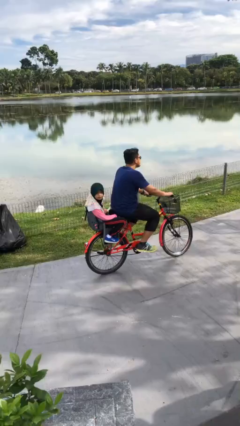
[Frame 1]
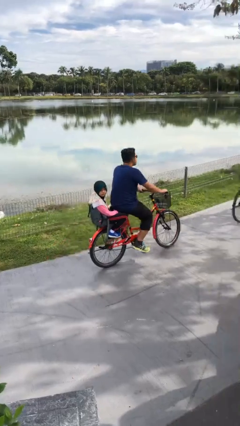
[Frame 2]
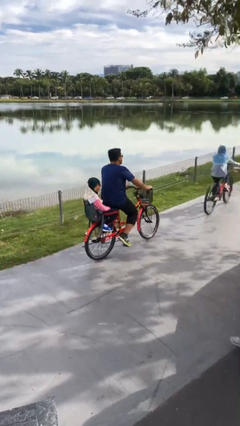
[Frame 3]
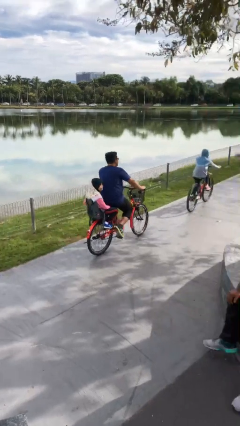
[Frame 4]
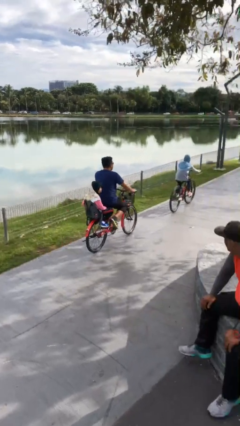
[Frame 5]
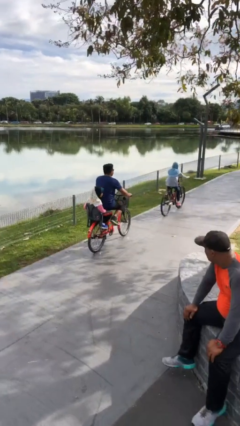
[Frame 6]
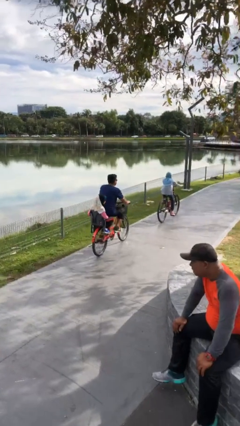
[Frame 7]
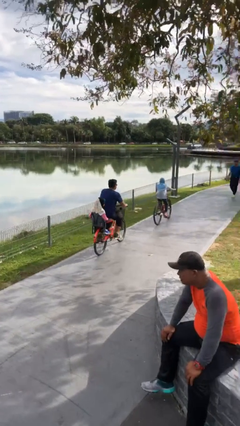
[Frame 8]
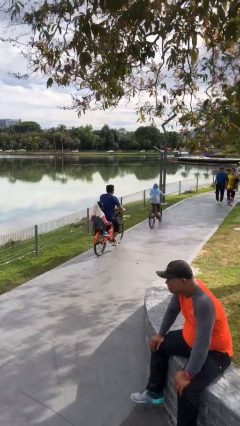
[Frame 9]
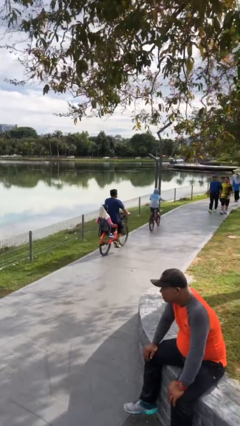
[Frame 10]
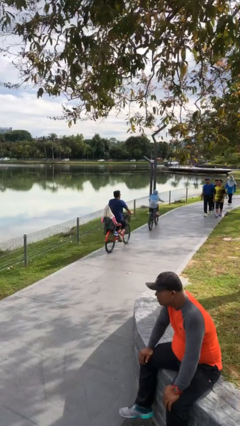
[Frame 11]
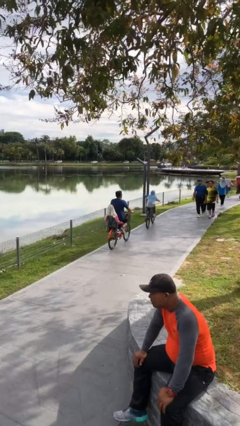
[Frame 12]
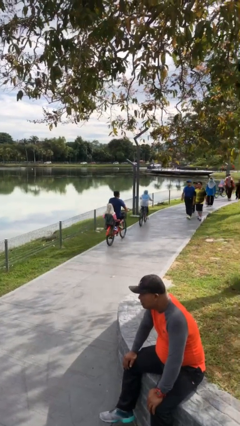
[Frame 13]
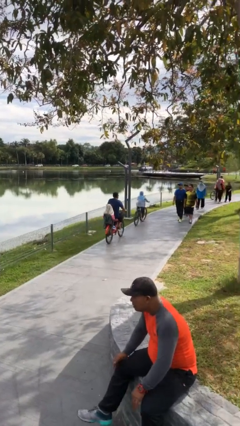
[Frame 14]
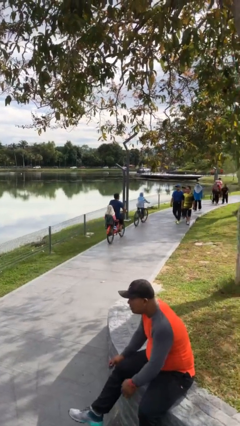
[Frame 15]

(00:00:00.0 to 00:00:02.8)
person rides bicycle

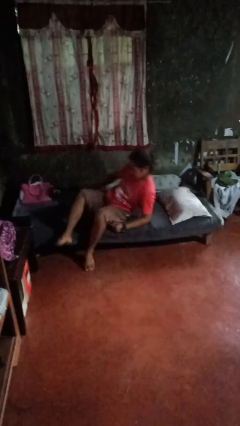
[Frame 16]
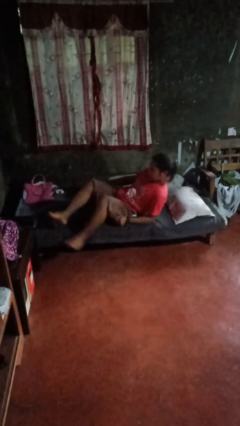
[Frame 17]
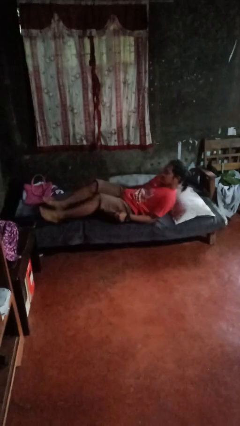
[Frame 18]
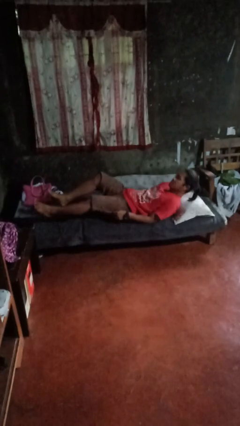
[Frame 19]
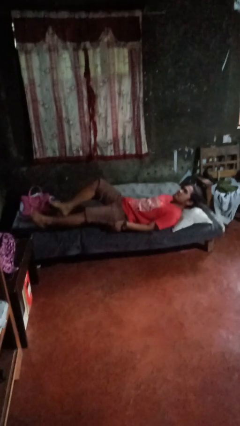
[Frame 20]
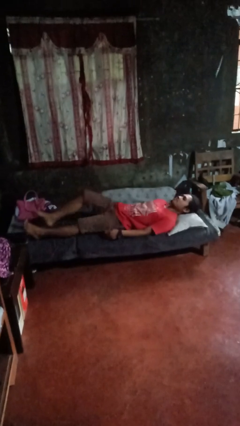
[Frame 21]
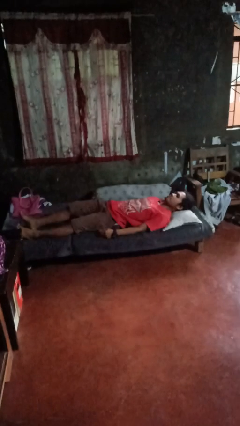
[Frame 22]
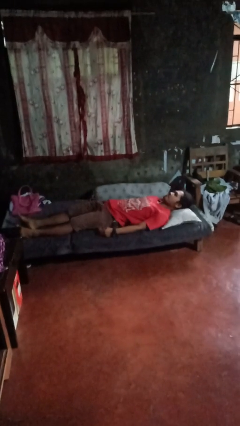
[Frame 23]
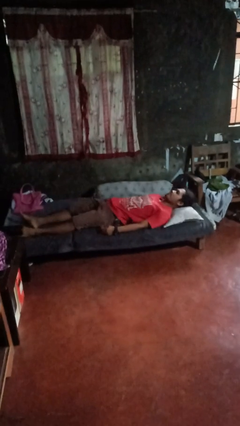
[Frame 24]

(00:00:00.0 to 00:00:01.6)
person lies down on bed

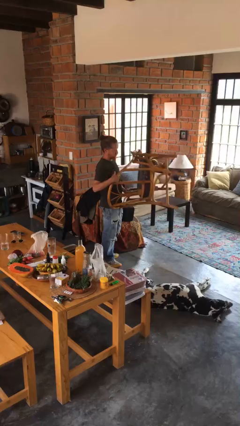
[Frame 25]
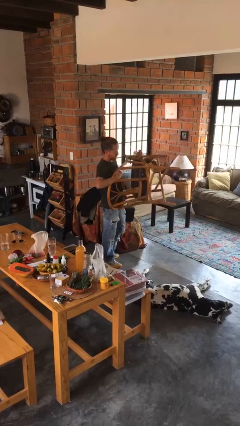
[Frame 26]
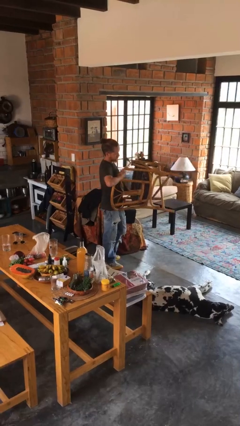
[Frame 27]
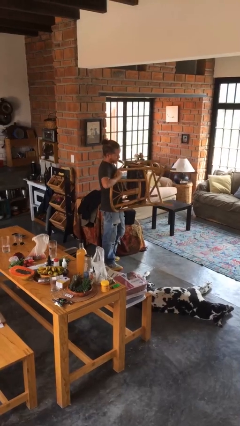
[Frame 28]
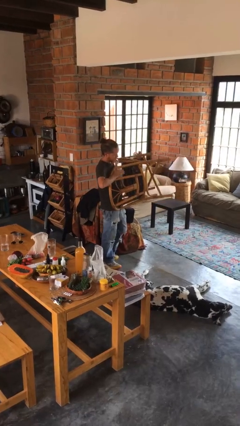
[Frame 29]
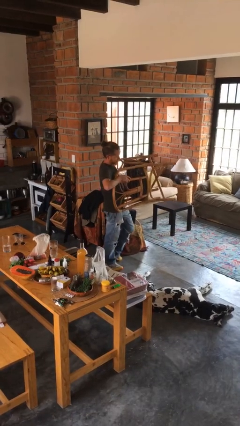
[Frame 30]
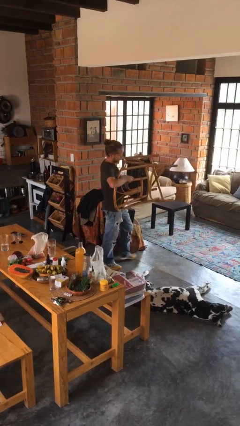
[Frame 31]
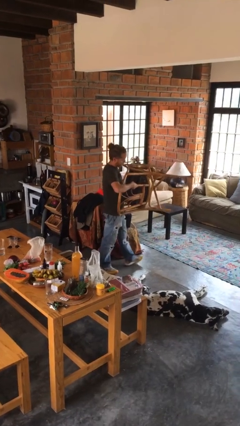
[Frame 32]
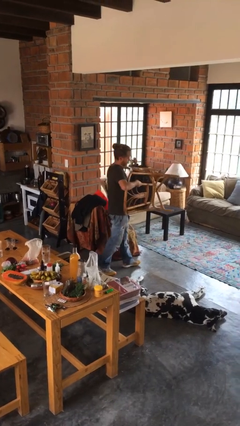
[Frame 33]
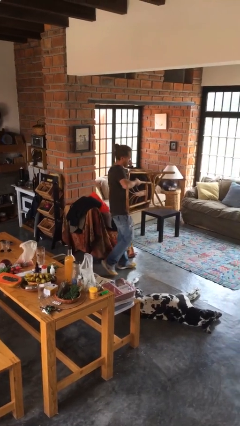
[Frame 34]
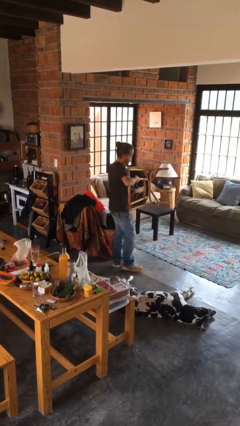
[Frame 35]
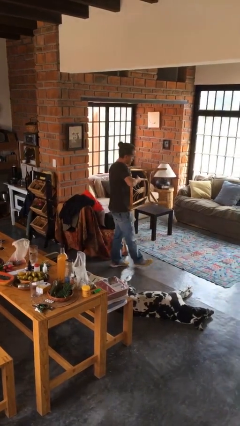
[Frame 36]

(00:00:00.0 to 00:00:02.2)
person carries furniture

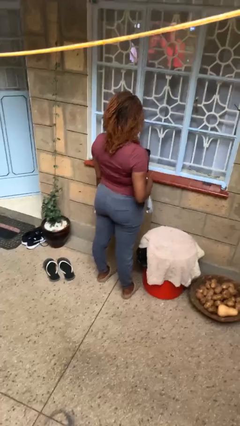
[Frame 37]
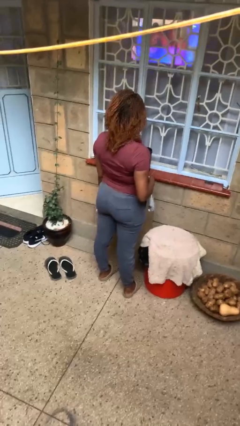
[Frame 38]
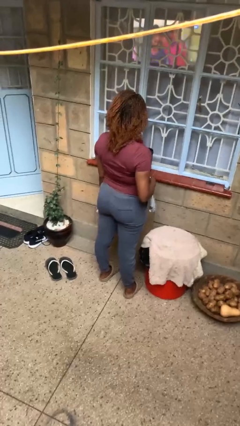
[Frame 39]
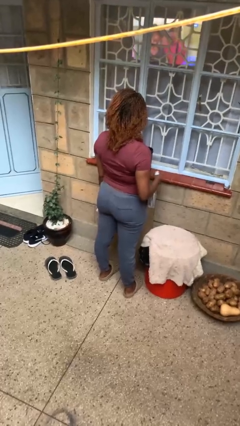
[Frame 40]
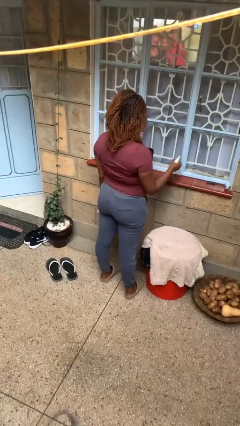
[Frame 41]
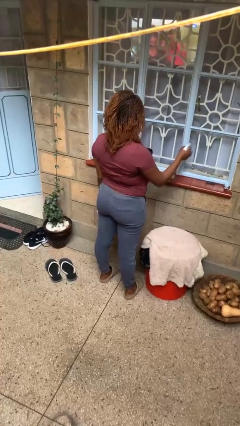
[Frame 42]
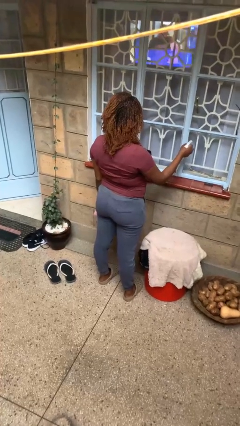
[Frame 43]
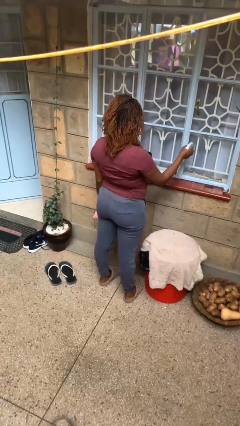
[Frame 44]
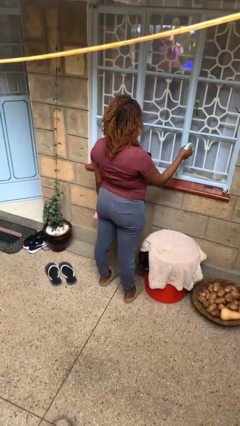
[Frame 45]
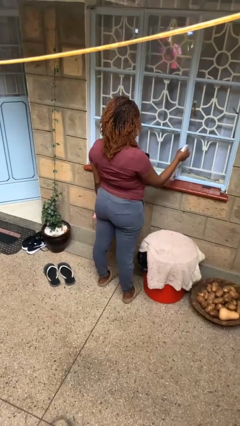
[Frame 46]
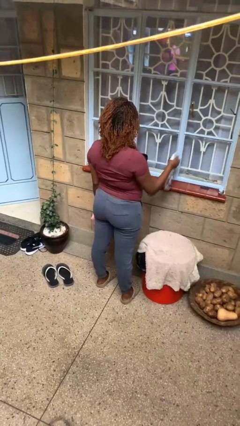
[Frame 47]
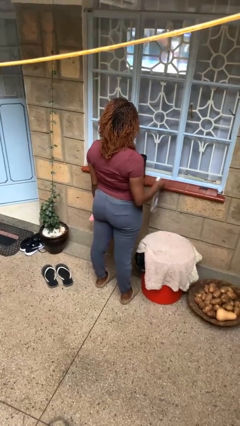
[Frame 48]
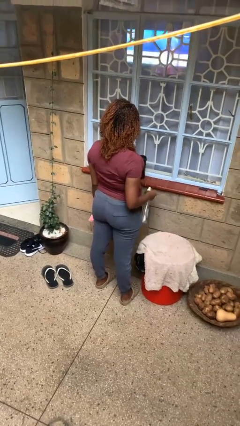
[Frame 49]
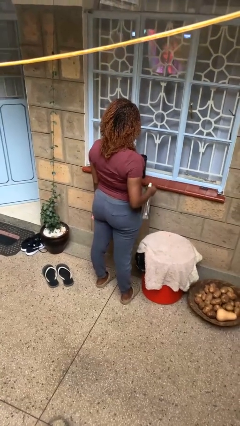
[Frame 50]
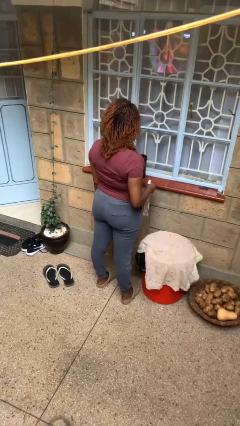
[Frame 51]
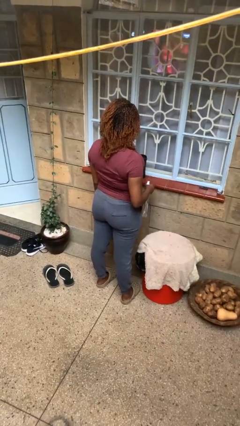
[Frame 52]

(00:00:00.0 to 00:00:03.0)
person sprays from bottle

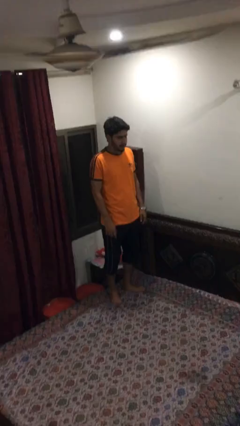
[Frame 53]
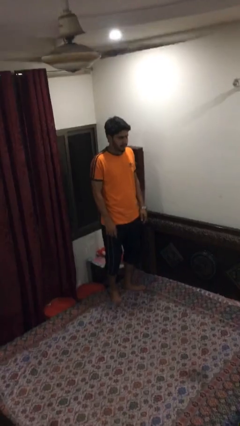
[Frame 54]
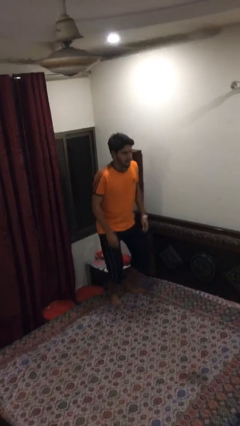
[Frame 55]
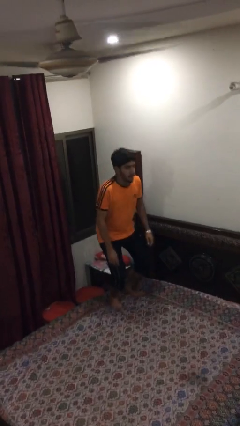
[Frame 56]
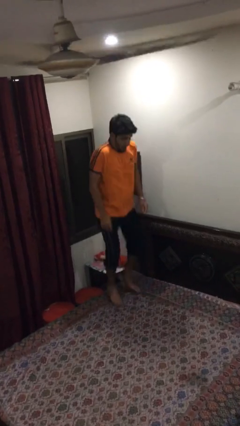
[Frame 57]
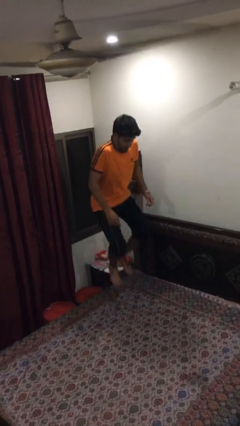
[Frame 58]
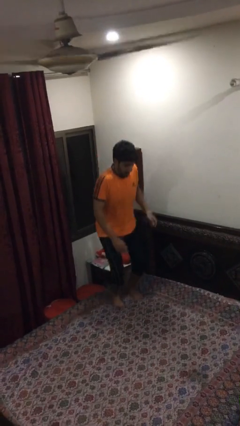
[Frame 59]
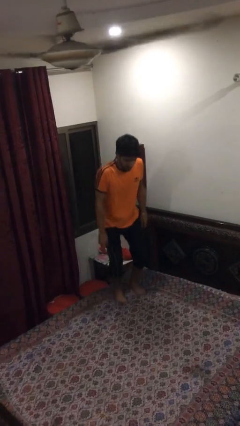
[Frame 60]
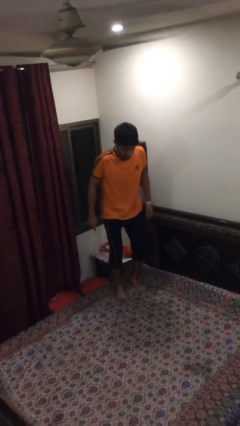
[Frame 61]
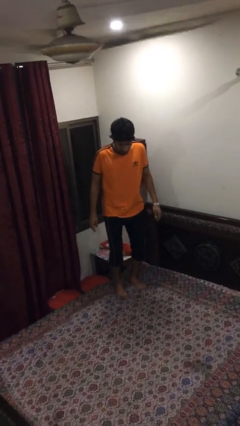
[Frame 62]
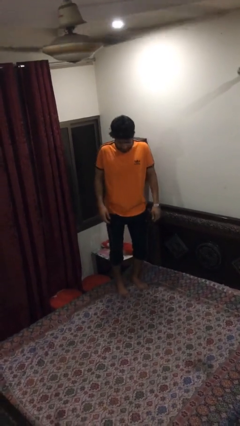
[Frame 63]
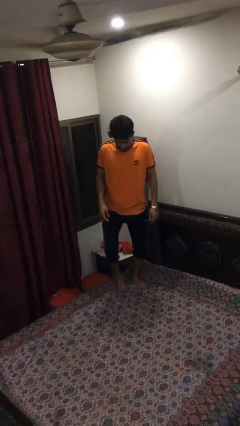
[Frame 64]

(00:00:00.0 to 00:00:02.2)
person jumps on bed

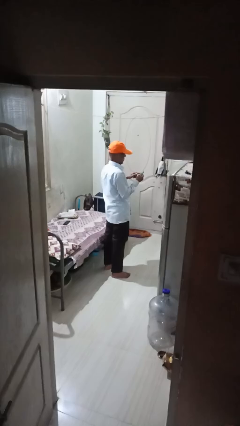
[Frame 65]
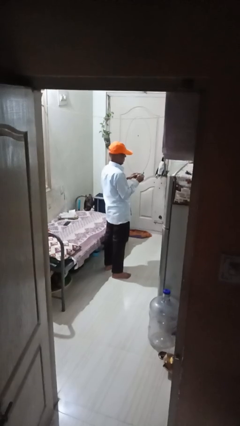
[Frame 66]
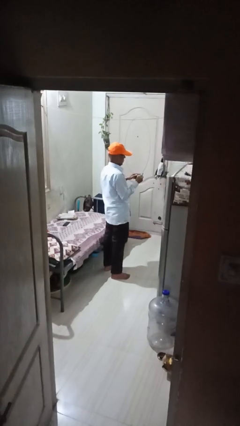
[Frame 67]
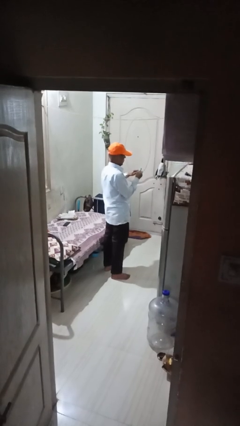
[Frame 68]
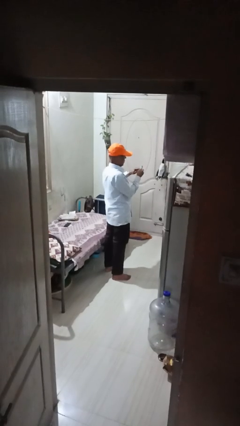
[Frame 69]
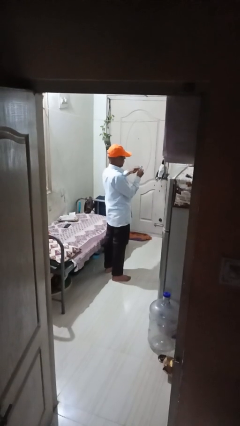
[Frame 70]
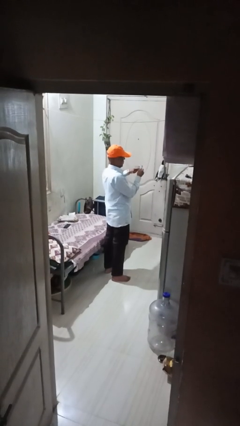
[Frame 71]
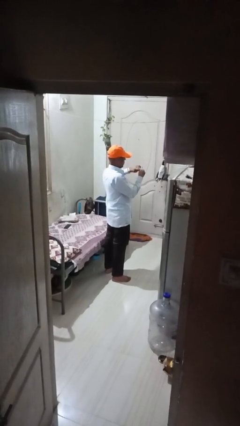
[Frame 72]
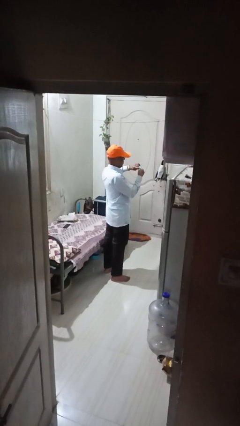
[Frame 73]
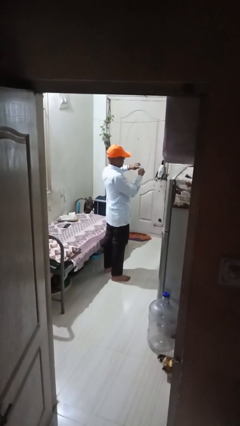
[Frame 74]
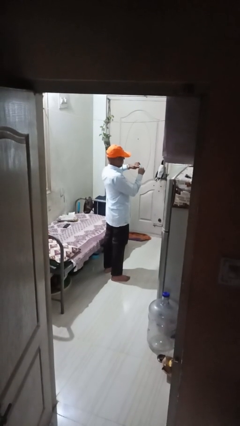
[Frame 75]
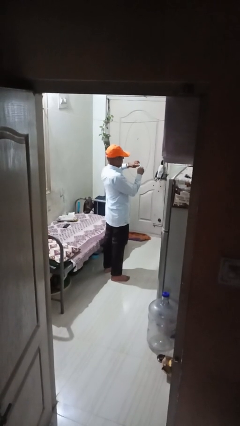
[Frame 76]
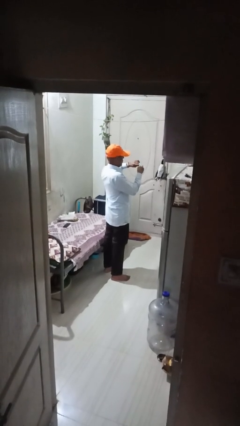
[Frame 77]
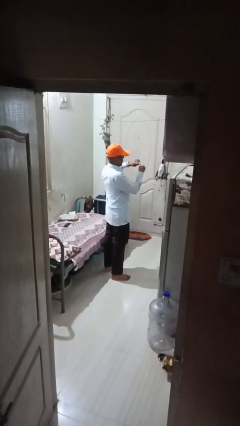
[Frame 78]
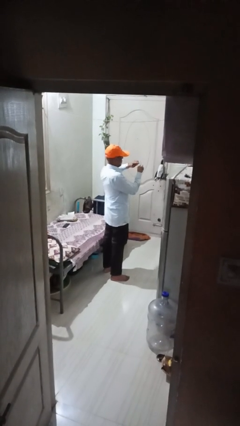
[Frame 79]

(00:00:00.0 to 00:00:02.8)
person files fingernails

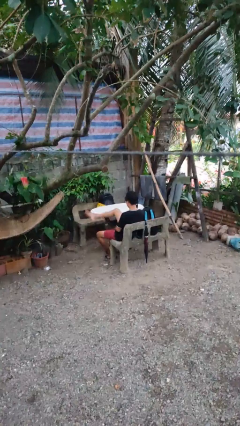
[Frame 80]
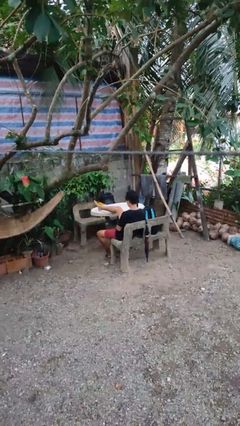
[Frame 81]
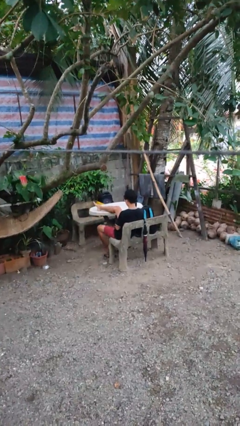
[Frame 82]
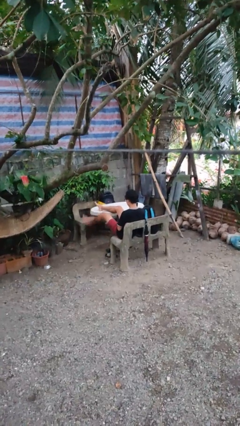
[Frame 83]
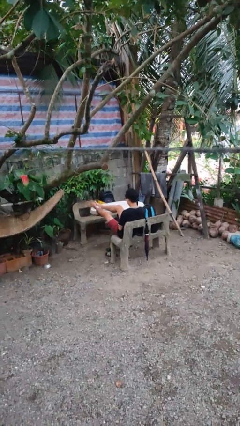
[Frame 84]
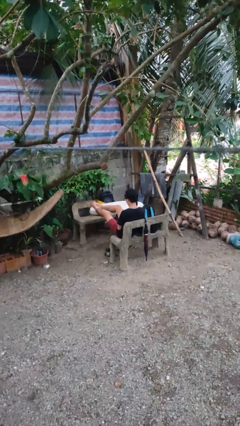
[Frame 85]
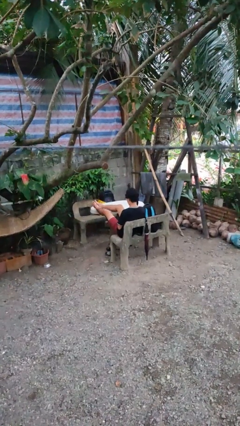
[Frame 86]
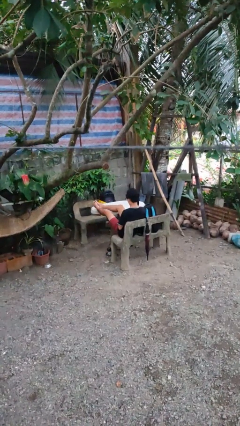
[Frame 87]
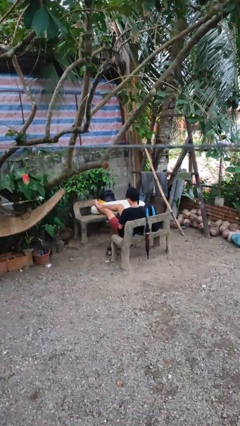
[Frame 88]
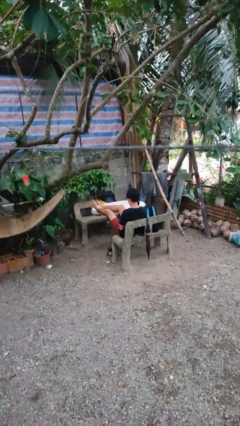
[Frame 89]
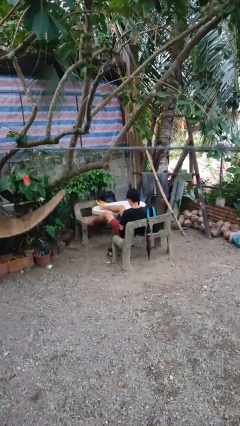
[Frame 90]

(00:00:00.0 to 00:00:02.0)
person puts feet up

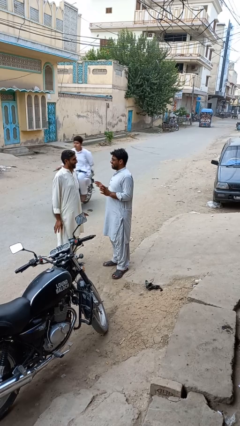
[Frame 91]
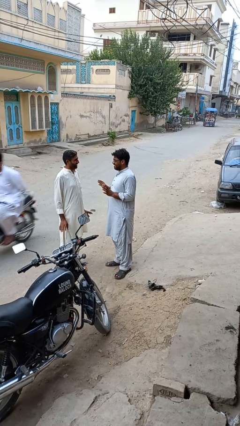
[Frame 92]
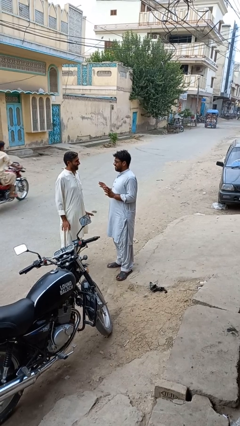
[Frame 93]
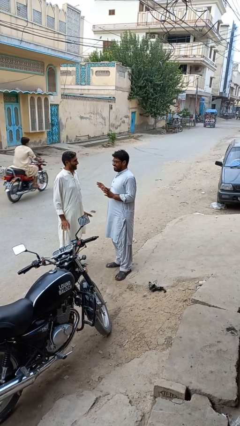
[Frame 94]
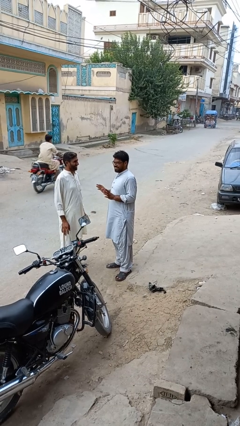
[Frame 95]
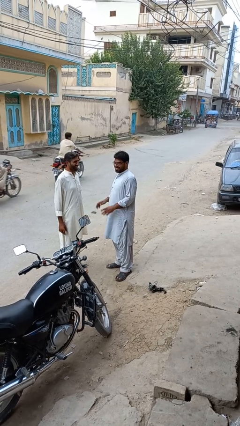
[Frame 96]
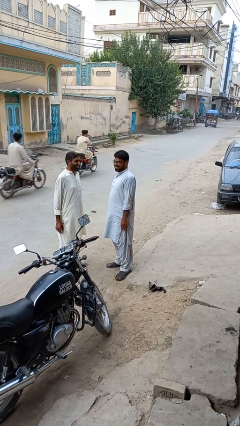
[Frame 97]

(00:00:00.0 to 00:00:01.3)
person laughs with person
